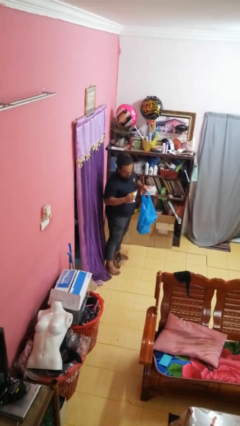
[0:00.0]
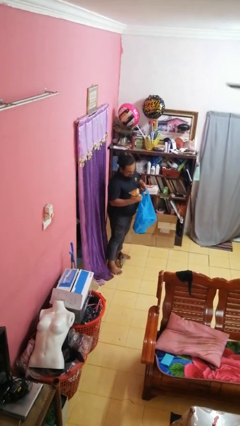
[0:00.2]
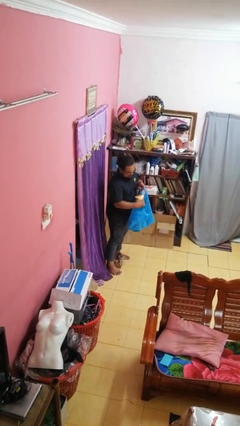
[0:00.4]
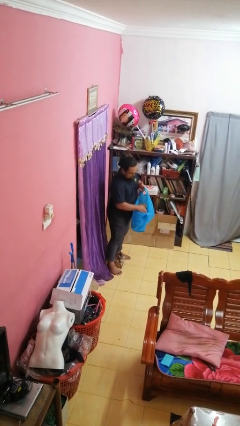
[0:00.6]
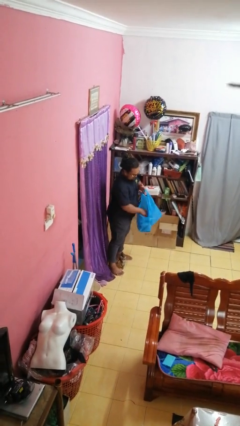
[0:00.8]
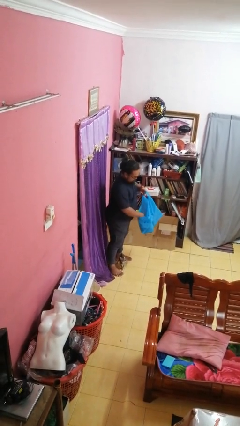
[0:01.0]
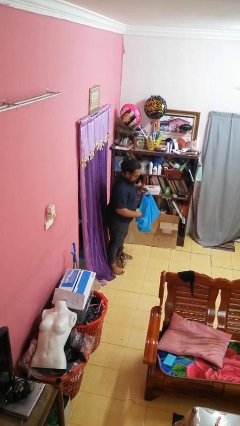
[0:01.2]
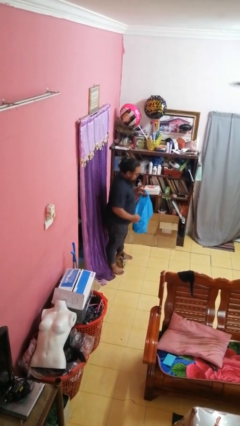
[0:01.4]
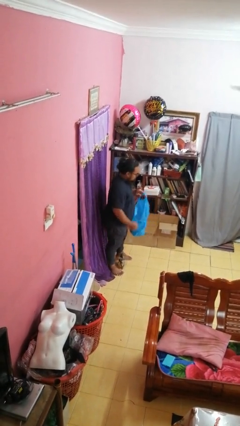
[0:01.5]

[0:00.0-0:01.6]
person puts object into bag

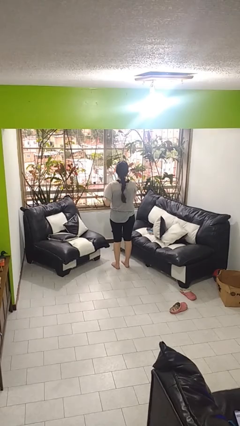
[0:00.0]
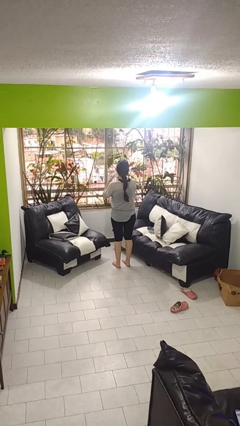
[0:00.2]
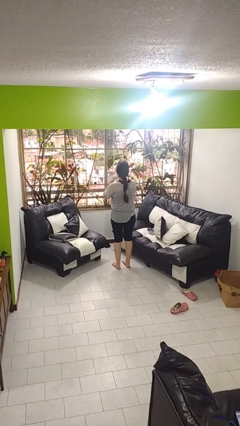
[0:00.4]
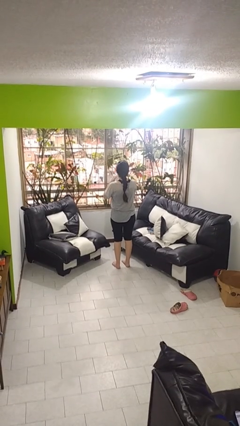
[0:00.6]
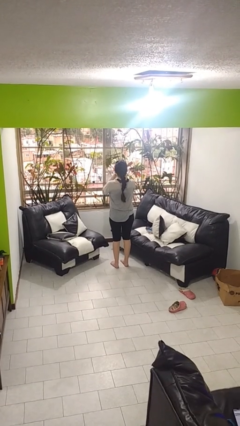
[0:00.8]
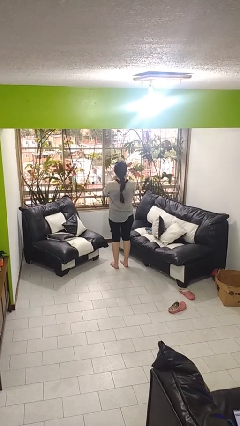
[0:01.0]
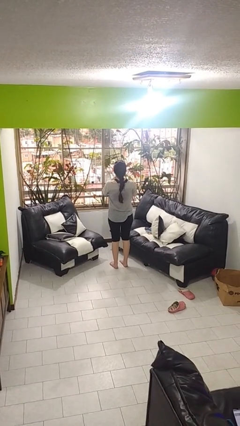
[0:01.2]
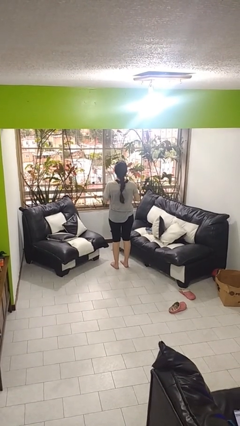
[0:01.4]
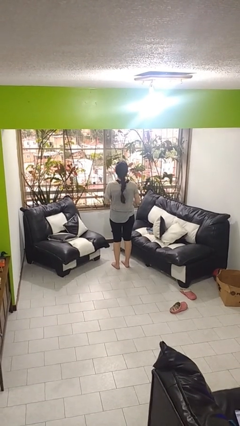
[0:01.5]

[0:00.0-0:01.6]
person wipes mouth with napkin

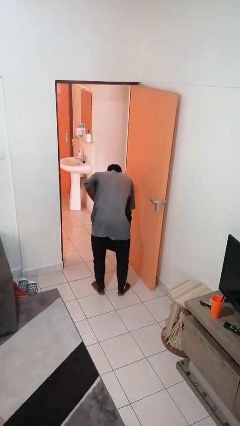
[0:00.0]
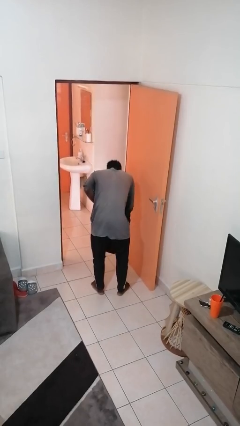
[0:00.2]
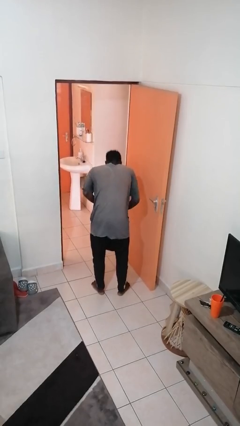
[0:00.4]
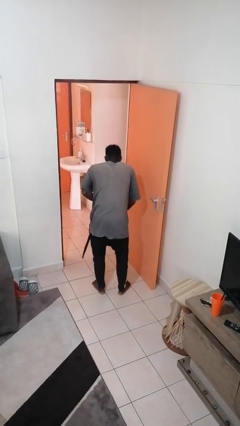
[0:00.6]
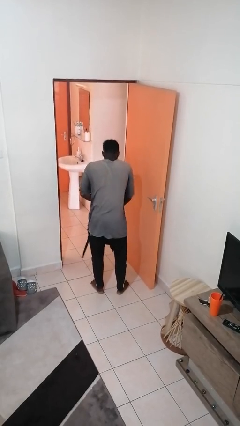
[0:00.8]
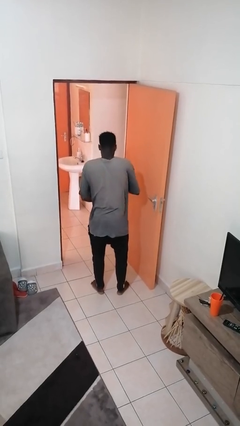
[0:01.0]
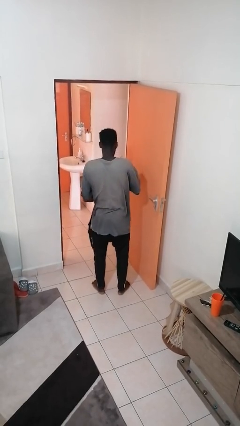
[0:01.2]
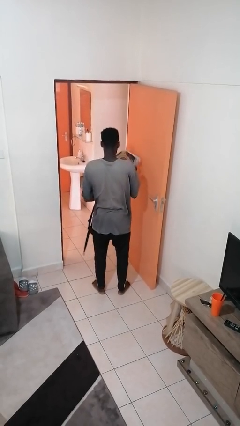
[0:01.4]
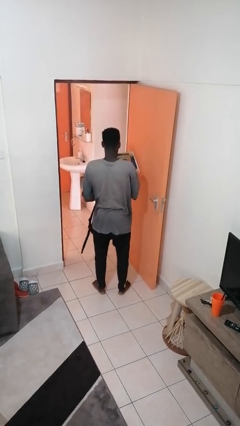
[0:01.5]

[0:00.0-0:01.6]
person takes object from backpack

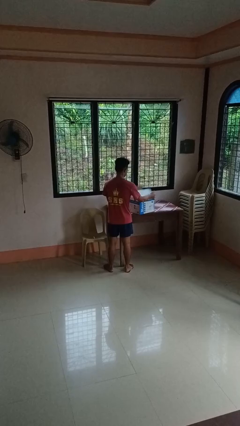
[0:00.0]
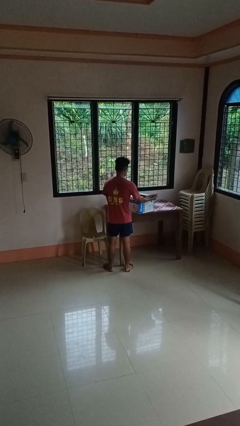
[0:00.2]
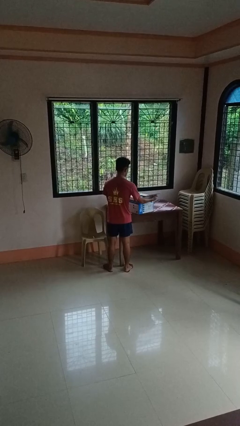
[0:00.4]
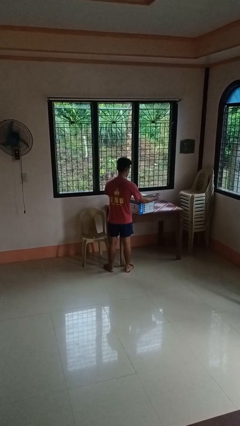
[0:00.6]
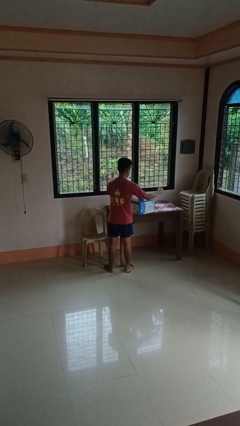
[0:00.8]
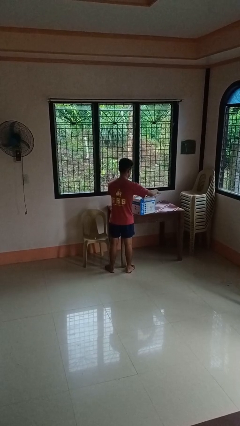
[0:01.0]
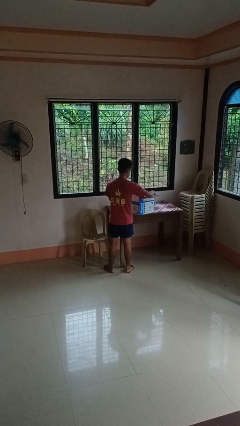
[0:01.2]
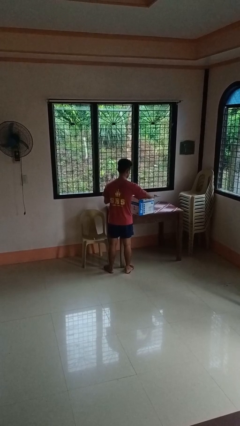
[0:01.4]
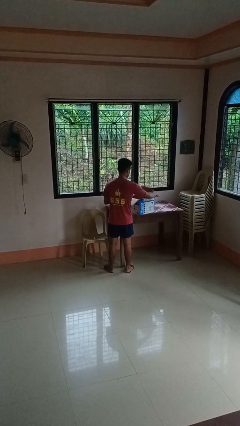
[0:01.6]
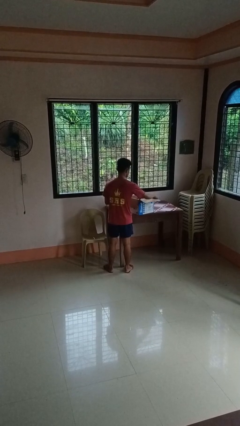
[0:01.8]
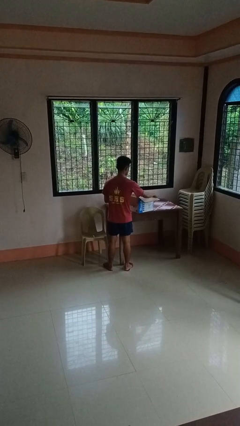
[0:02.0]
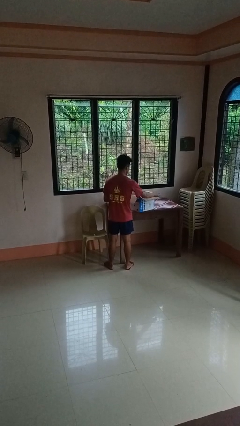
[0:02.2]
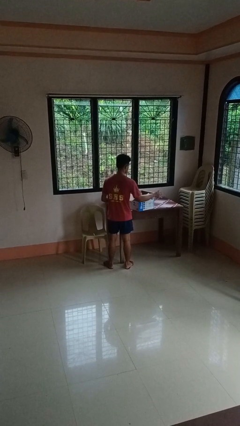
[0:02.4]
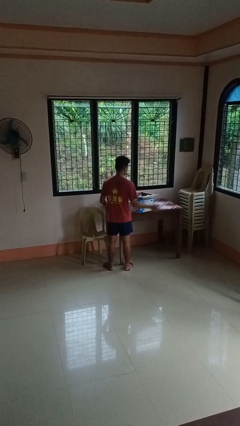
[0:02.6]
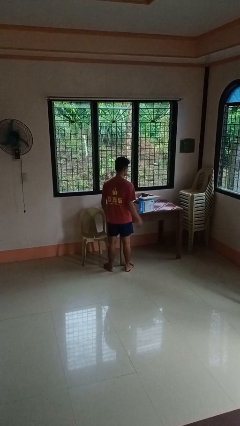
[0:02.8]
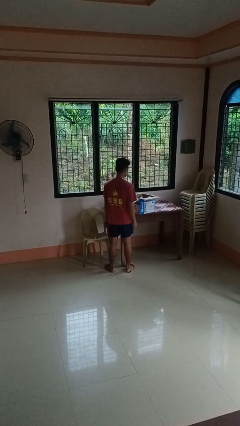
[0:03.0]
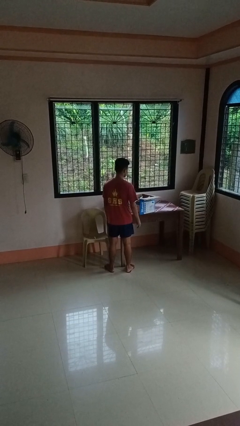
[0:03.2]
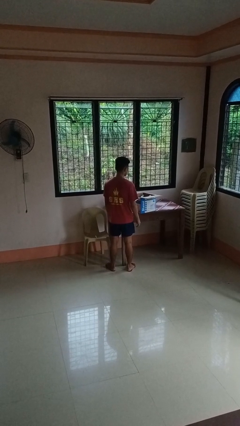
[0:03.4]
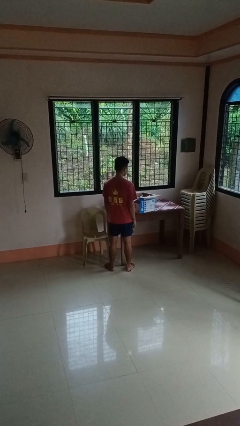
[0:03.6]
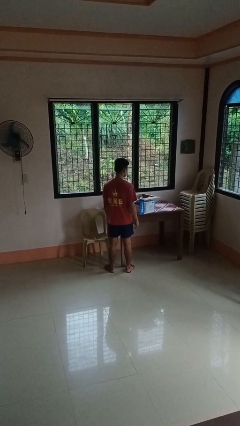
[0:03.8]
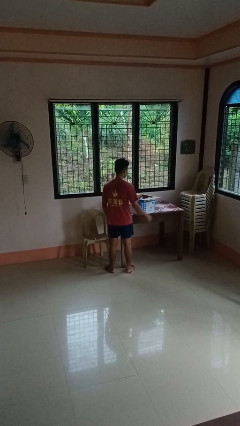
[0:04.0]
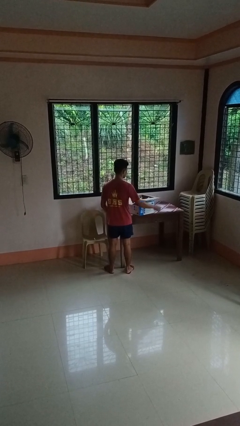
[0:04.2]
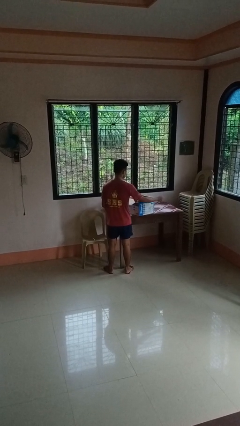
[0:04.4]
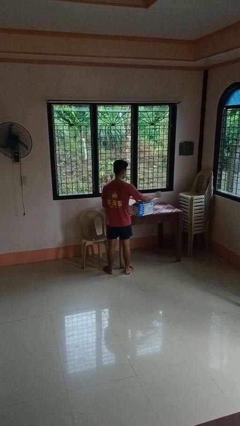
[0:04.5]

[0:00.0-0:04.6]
person opens box

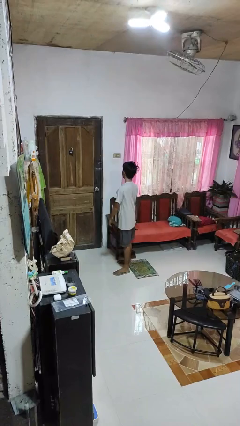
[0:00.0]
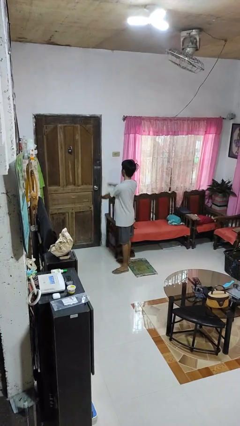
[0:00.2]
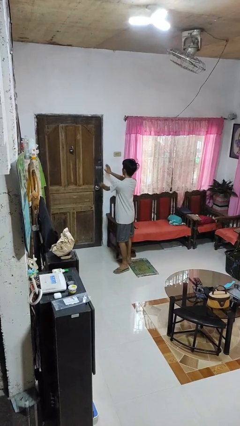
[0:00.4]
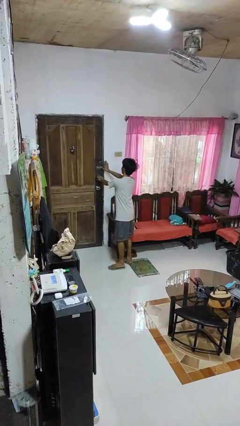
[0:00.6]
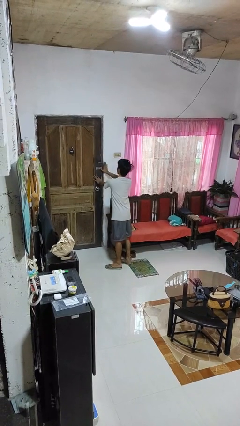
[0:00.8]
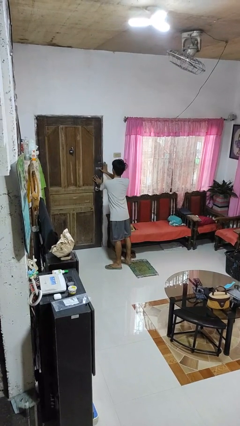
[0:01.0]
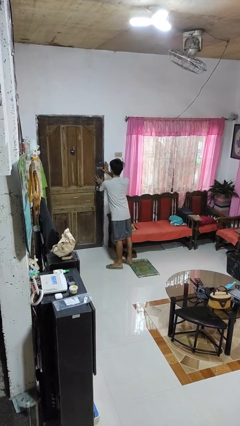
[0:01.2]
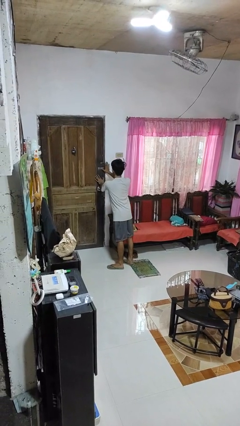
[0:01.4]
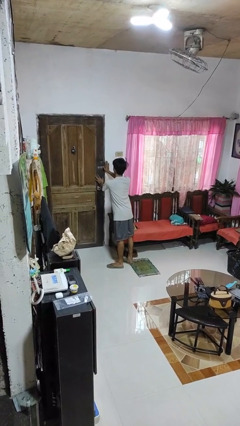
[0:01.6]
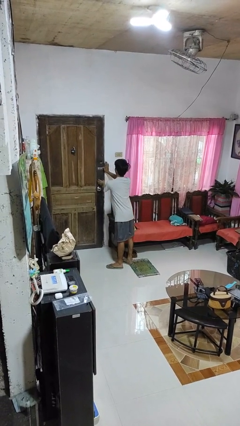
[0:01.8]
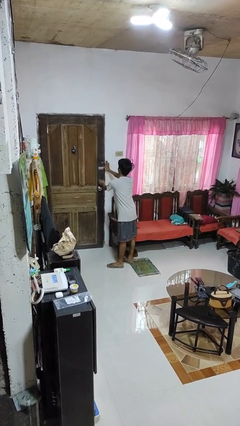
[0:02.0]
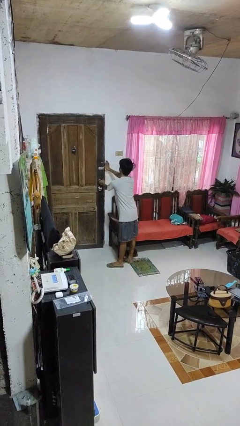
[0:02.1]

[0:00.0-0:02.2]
person unlocks door with keys

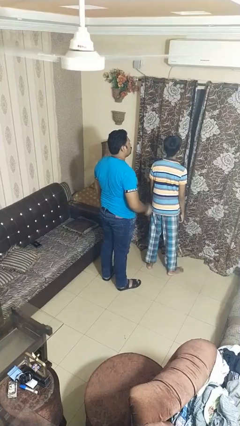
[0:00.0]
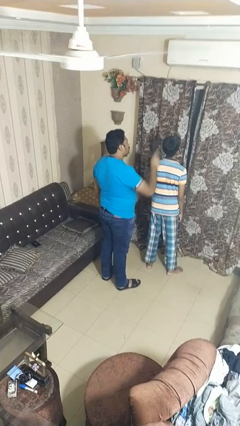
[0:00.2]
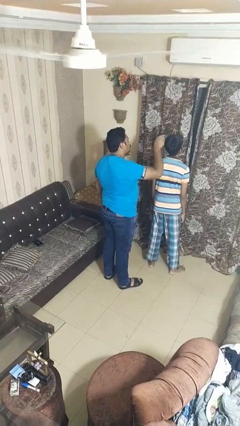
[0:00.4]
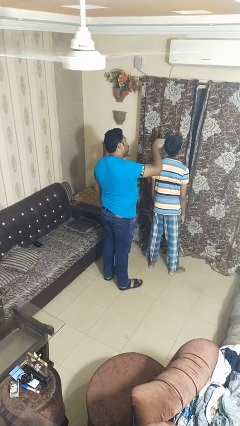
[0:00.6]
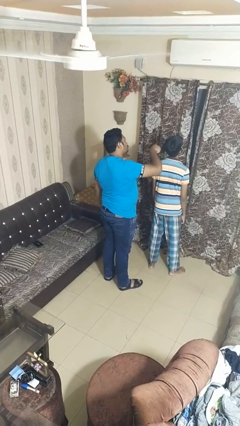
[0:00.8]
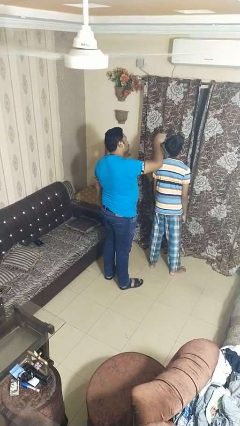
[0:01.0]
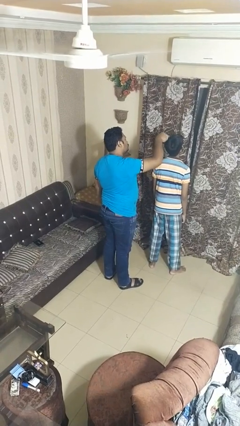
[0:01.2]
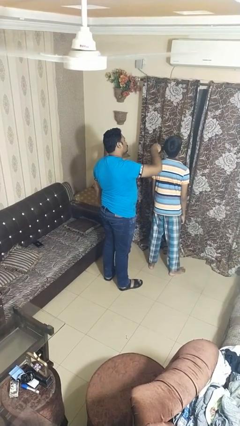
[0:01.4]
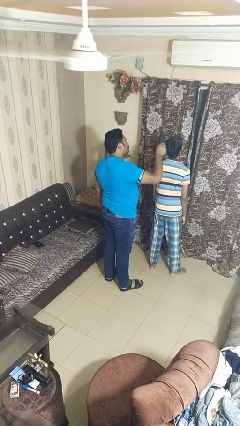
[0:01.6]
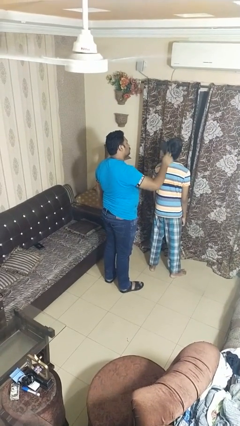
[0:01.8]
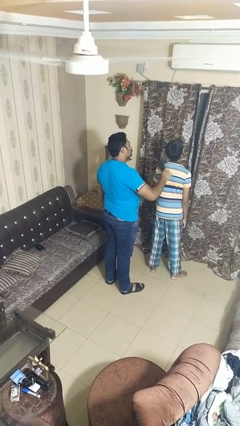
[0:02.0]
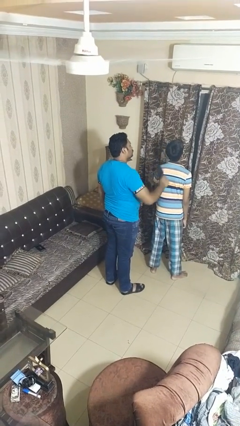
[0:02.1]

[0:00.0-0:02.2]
person brushes hair of person

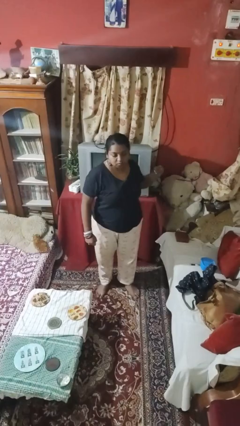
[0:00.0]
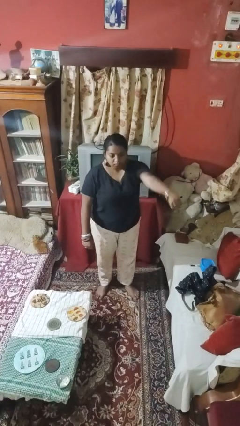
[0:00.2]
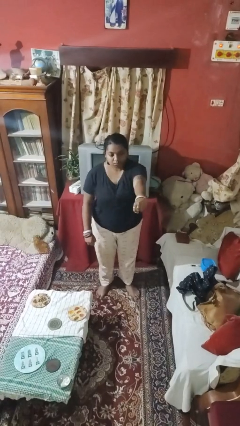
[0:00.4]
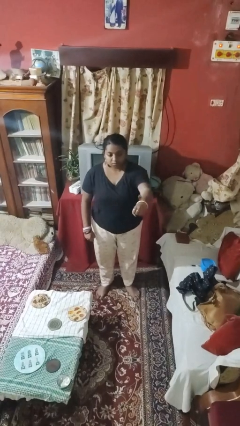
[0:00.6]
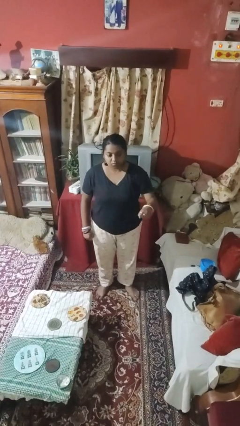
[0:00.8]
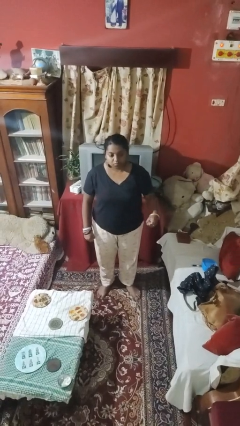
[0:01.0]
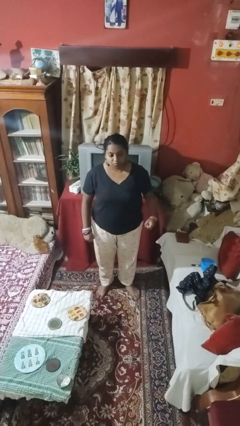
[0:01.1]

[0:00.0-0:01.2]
person punches

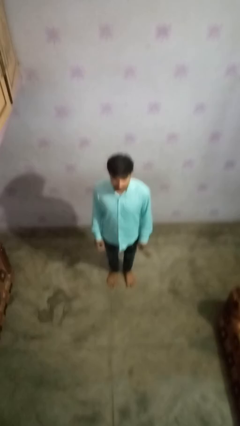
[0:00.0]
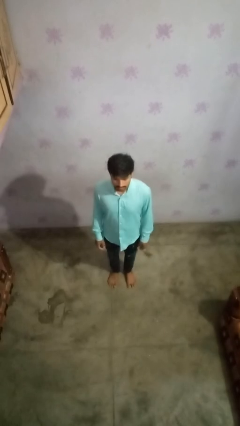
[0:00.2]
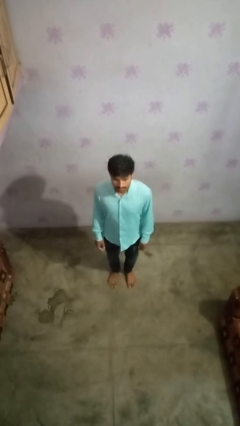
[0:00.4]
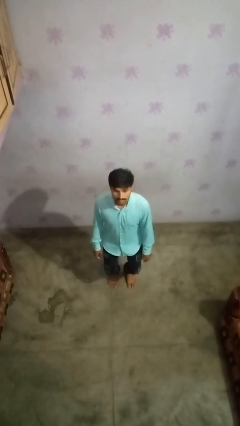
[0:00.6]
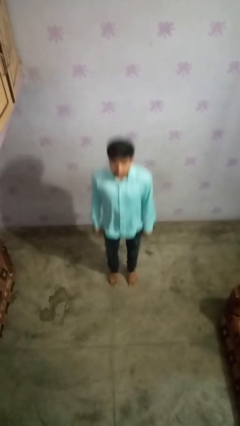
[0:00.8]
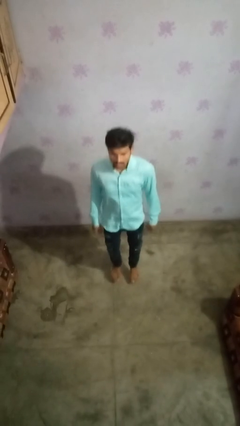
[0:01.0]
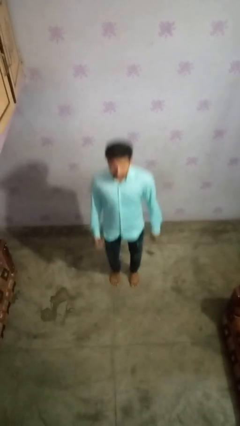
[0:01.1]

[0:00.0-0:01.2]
person jumps
